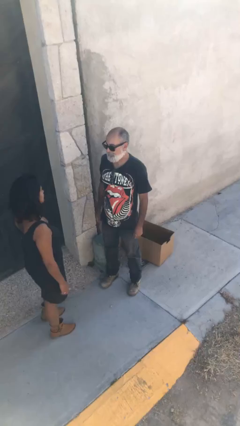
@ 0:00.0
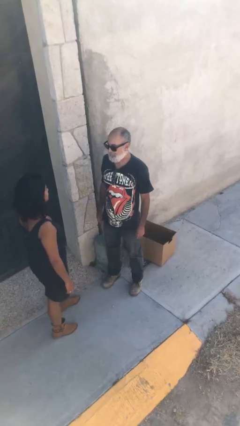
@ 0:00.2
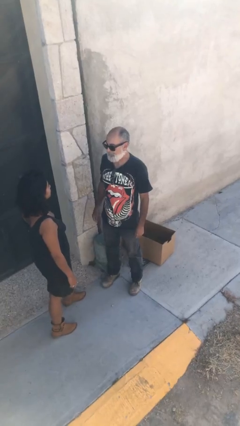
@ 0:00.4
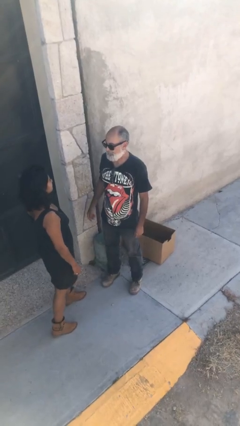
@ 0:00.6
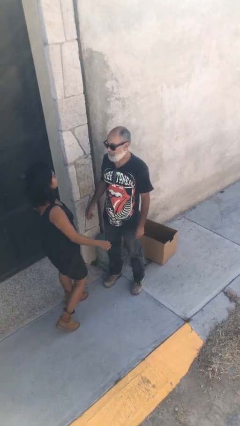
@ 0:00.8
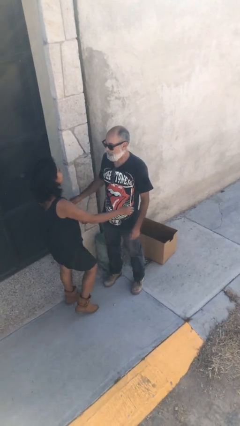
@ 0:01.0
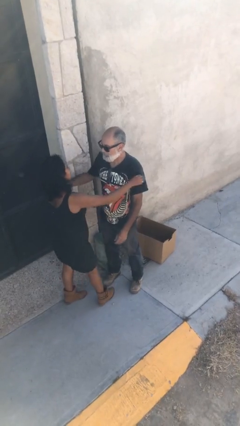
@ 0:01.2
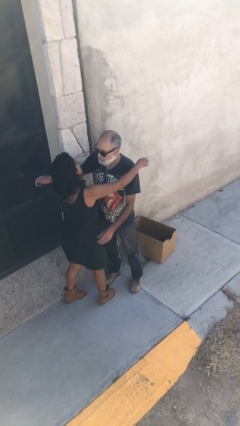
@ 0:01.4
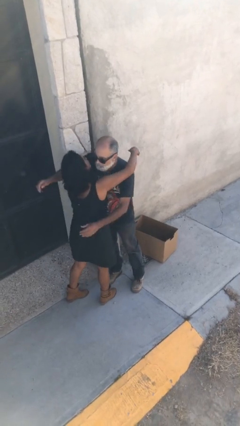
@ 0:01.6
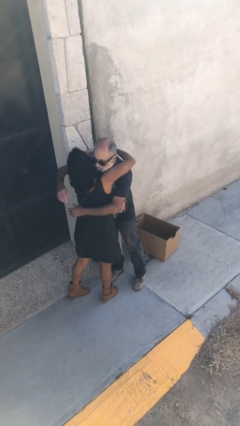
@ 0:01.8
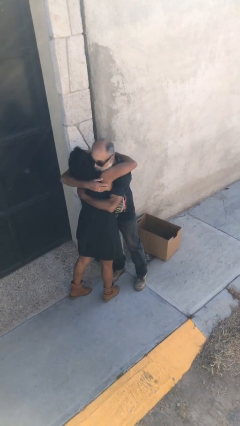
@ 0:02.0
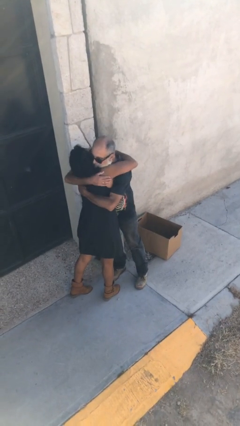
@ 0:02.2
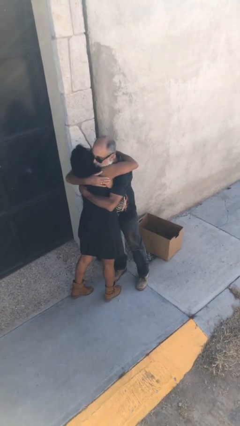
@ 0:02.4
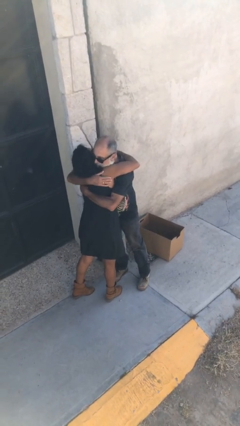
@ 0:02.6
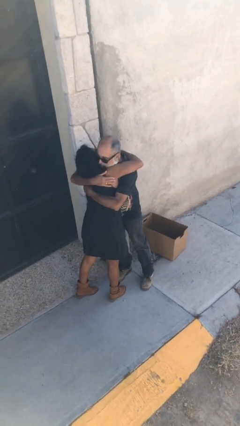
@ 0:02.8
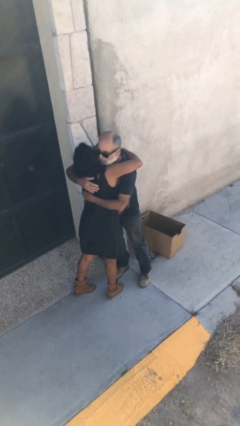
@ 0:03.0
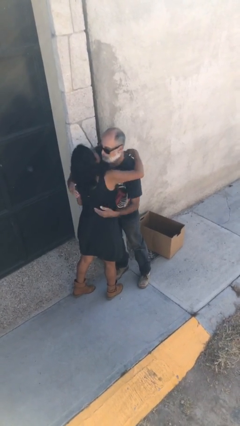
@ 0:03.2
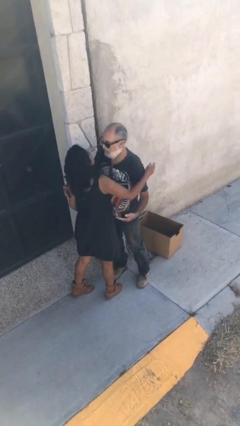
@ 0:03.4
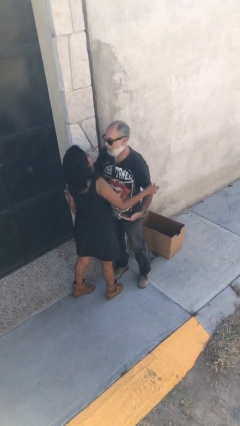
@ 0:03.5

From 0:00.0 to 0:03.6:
person embraces person

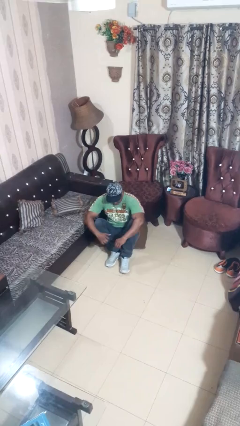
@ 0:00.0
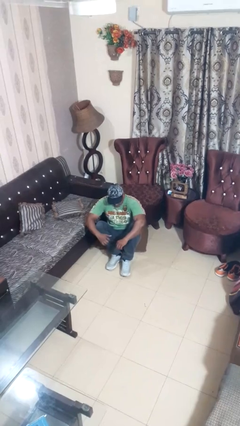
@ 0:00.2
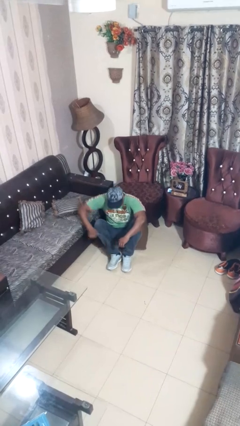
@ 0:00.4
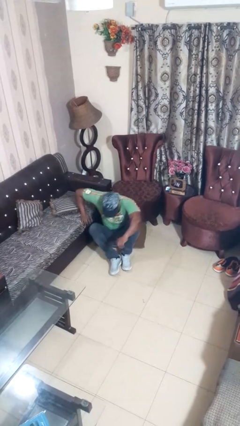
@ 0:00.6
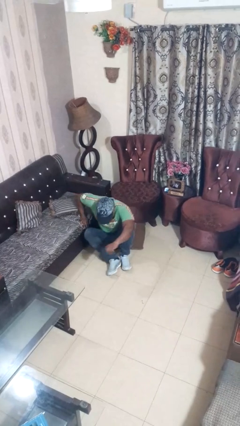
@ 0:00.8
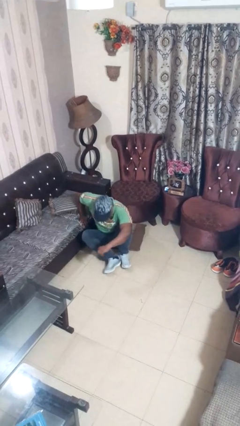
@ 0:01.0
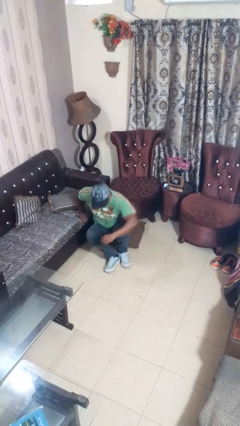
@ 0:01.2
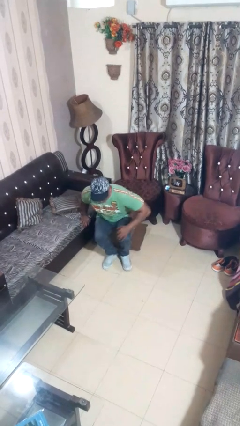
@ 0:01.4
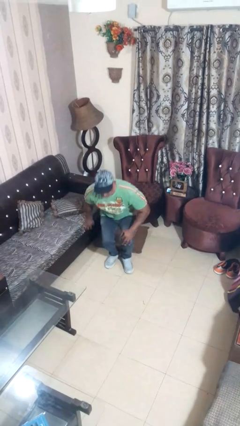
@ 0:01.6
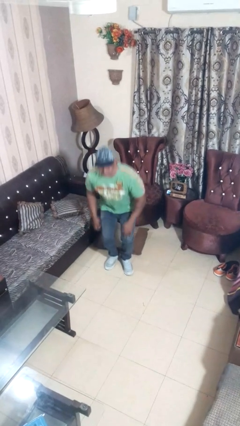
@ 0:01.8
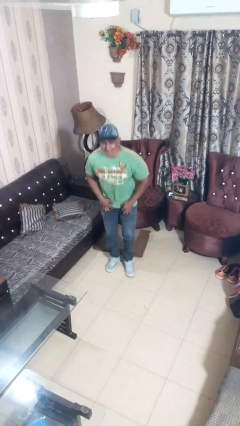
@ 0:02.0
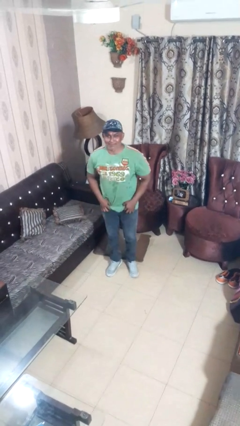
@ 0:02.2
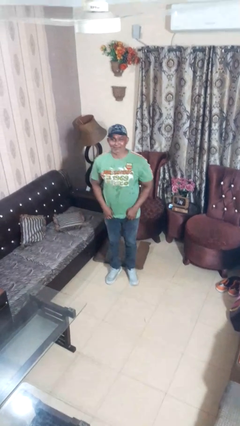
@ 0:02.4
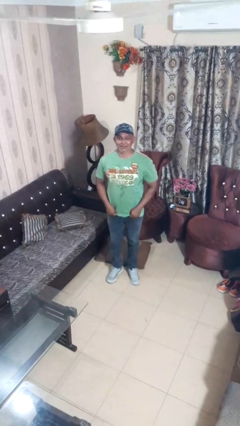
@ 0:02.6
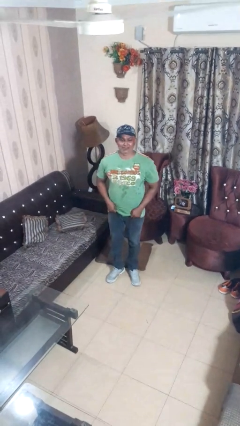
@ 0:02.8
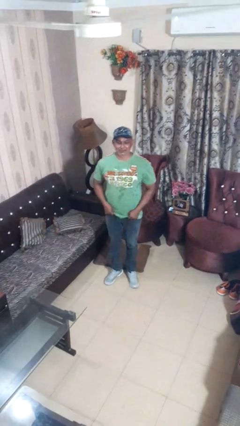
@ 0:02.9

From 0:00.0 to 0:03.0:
person stands up from floor

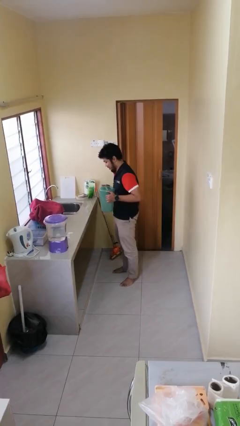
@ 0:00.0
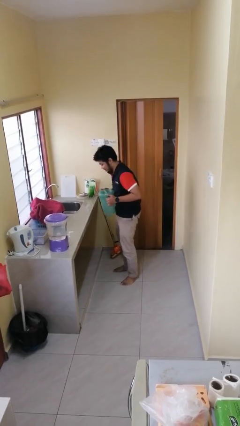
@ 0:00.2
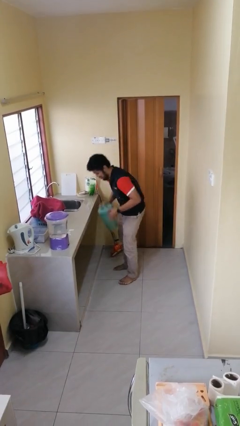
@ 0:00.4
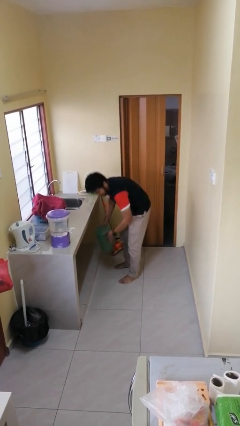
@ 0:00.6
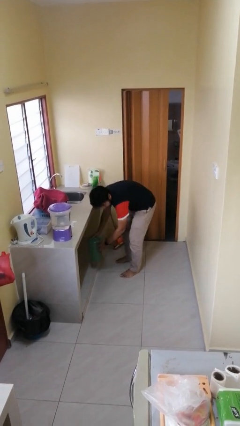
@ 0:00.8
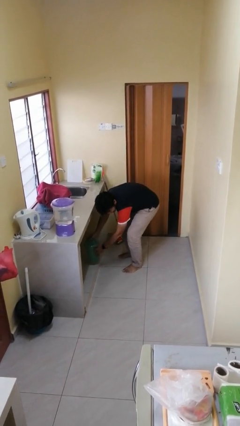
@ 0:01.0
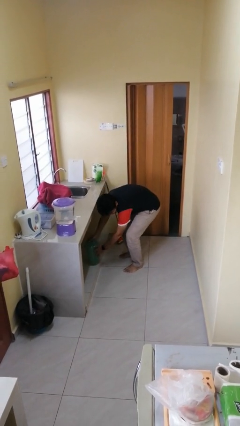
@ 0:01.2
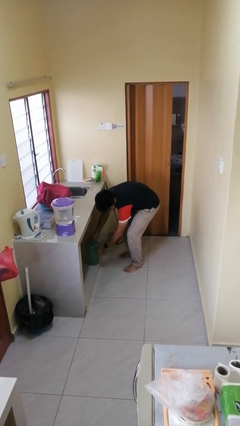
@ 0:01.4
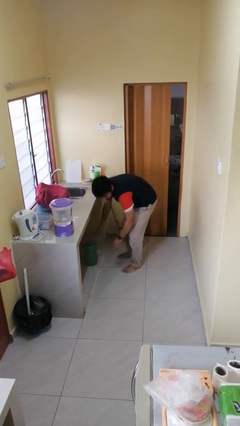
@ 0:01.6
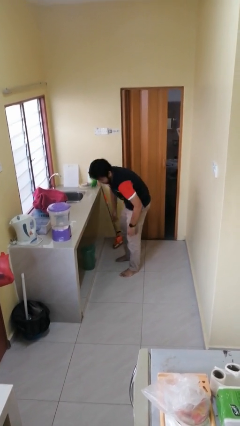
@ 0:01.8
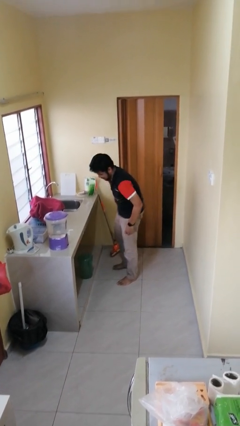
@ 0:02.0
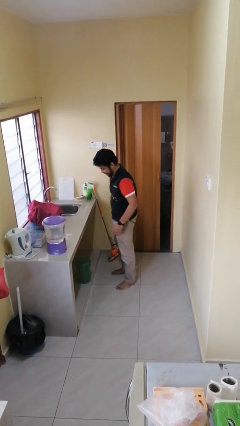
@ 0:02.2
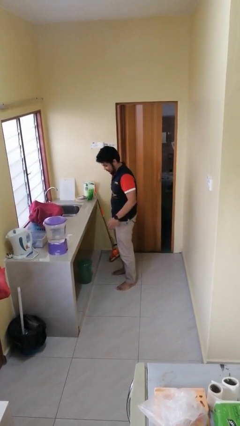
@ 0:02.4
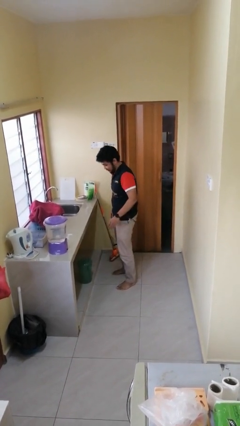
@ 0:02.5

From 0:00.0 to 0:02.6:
person puts down object into cabinet

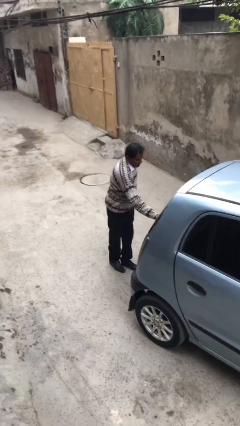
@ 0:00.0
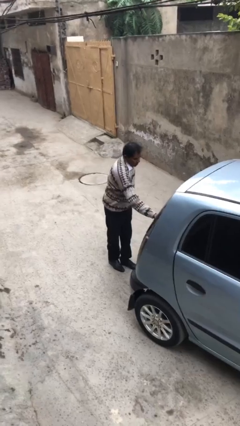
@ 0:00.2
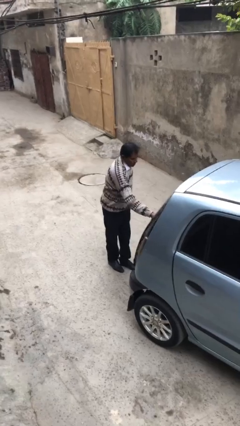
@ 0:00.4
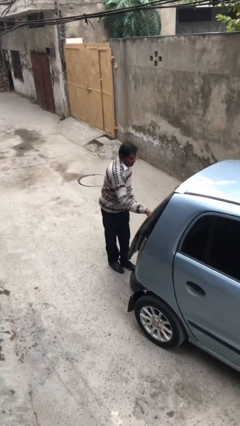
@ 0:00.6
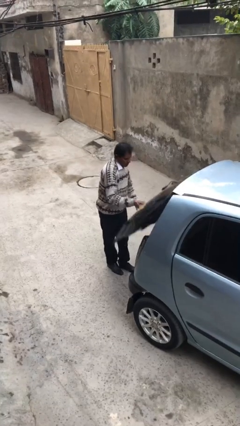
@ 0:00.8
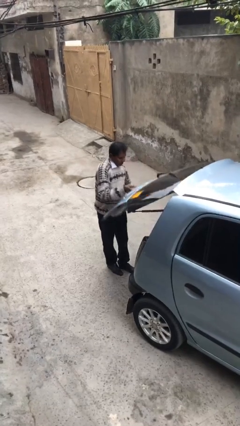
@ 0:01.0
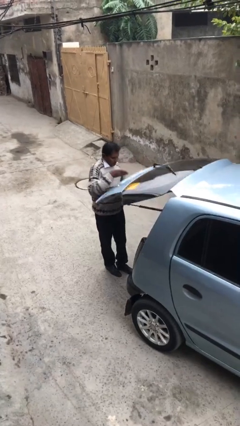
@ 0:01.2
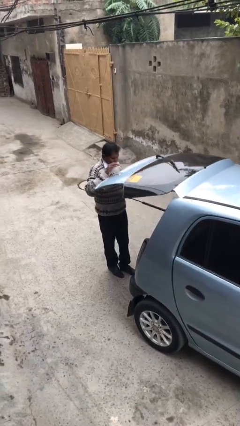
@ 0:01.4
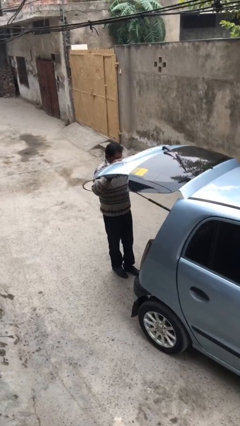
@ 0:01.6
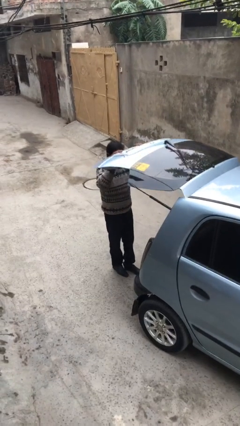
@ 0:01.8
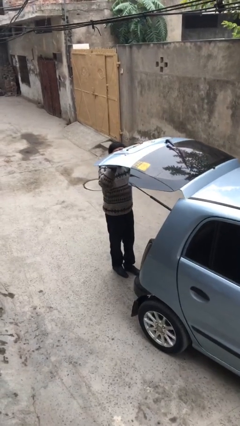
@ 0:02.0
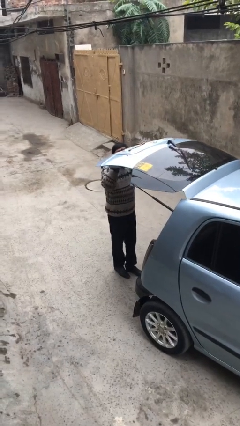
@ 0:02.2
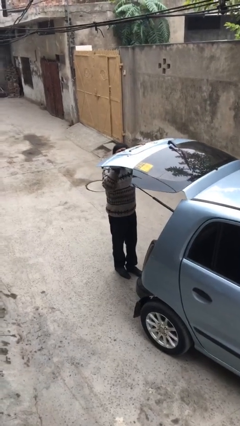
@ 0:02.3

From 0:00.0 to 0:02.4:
person opens car trunk

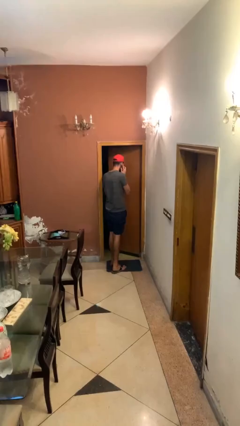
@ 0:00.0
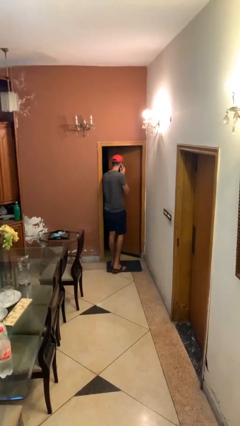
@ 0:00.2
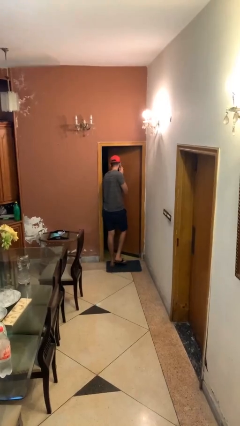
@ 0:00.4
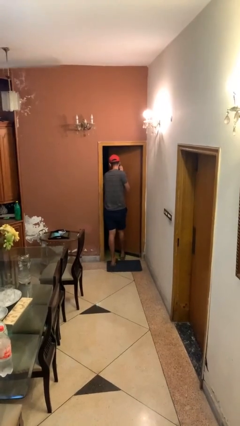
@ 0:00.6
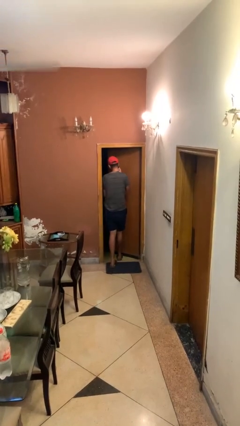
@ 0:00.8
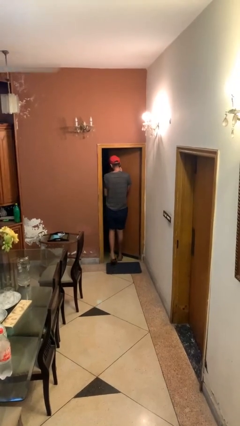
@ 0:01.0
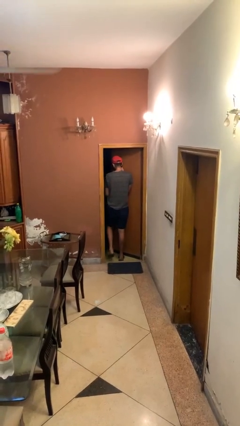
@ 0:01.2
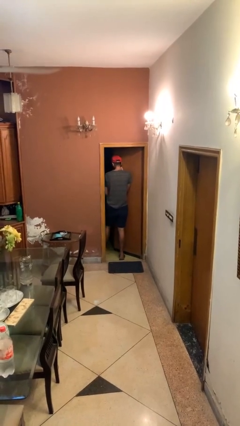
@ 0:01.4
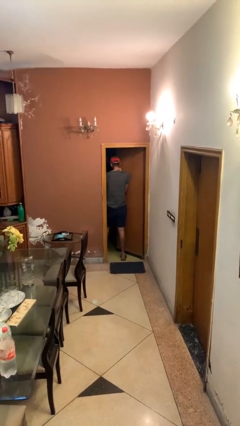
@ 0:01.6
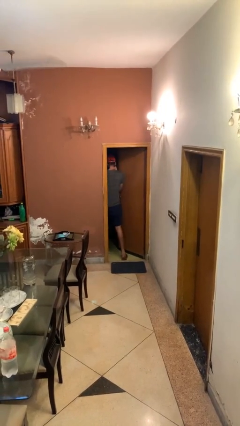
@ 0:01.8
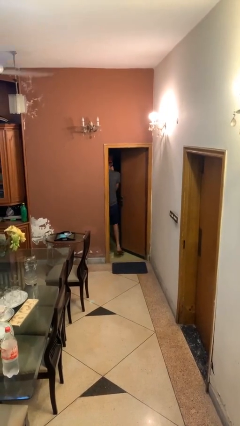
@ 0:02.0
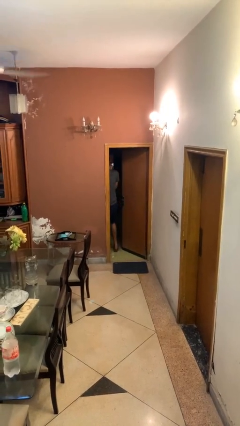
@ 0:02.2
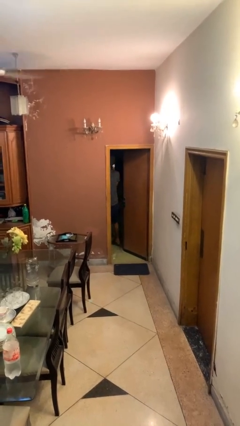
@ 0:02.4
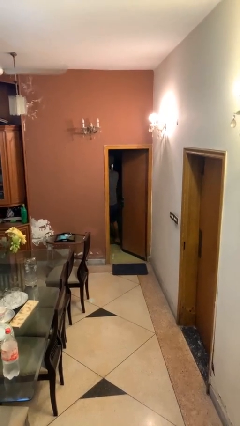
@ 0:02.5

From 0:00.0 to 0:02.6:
person exits scene through structure

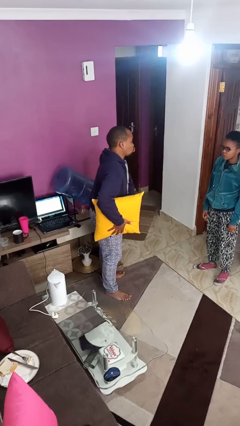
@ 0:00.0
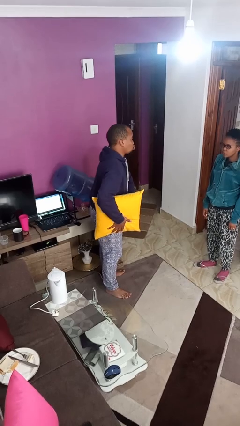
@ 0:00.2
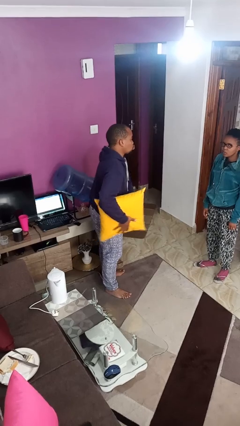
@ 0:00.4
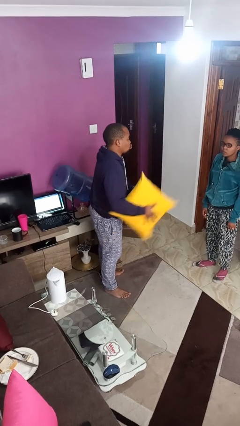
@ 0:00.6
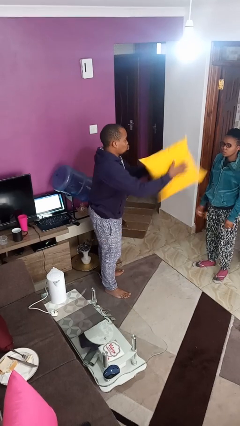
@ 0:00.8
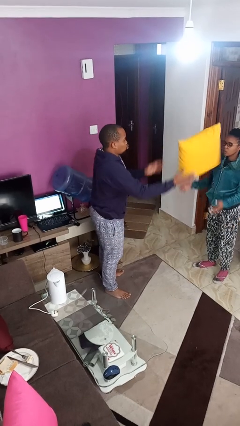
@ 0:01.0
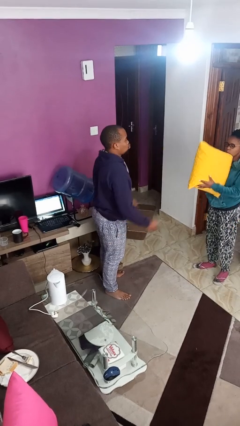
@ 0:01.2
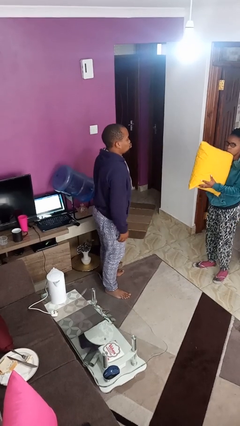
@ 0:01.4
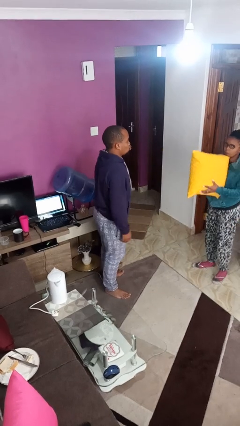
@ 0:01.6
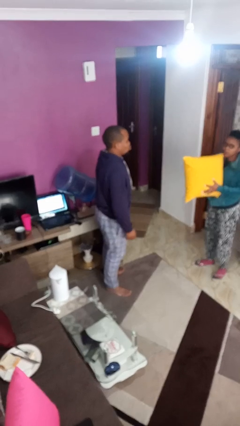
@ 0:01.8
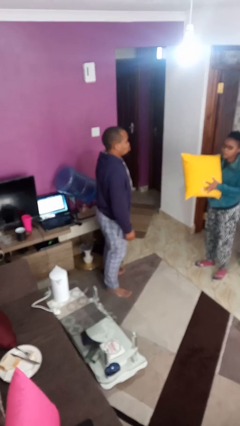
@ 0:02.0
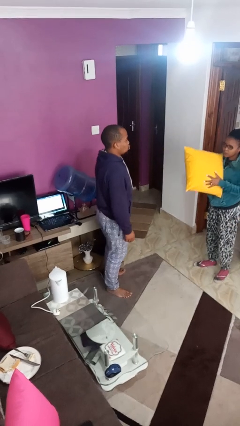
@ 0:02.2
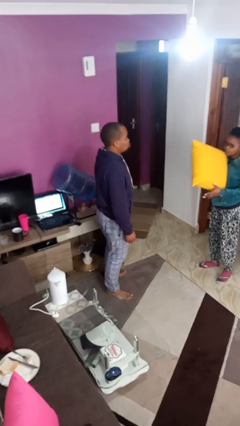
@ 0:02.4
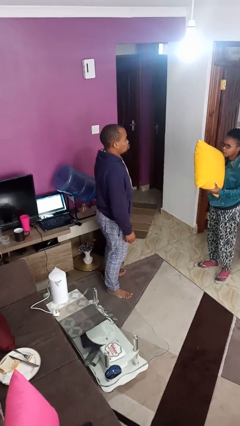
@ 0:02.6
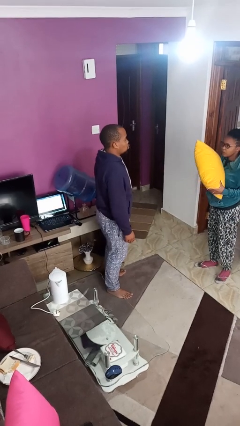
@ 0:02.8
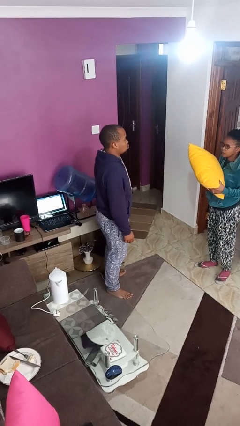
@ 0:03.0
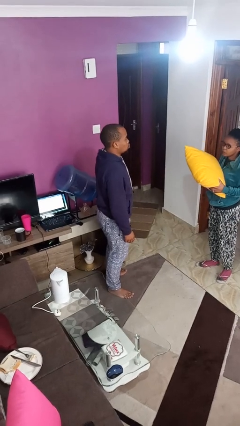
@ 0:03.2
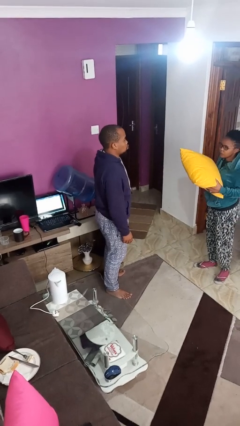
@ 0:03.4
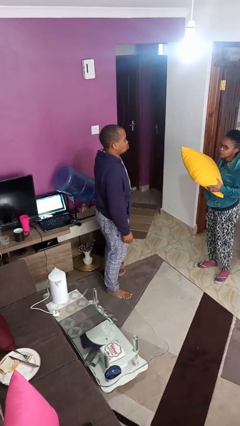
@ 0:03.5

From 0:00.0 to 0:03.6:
person throws object to person
